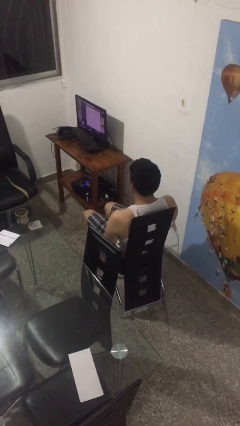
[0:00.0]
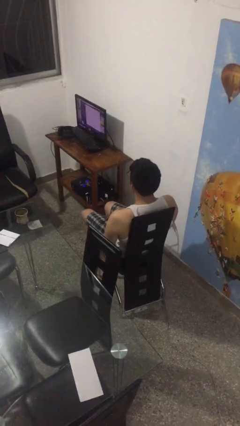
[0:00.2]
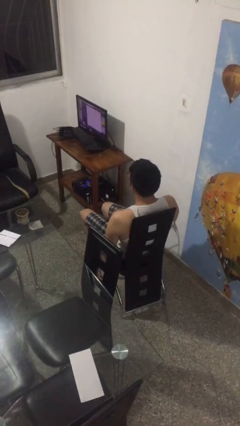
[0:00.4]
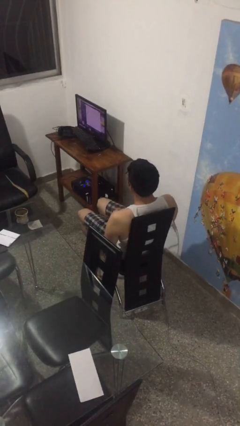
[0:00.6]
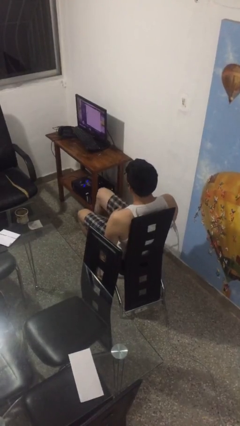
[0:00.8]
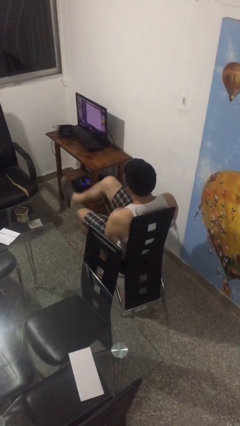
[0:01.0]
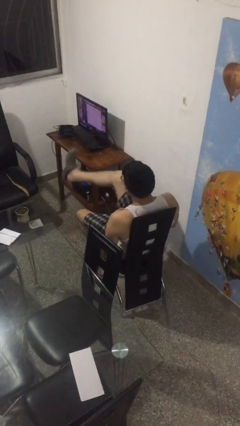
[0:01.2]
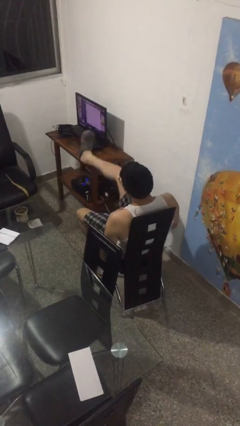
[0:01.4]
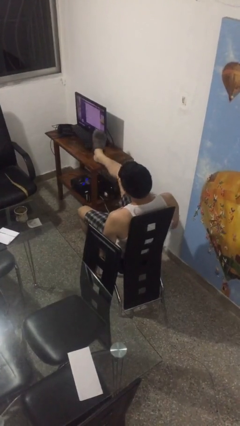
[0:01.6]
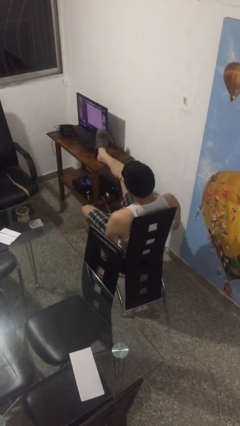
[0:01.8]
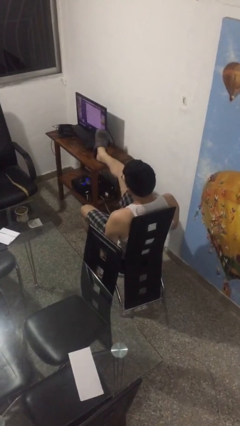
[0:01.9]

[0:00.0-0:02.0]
person puts feet up

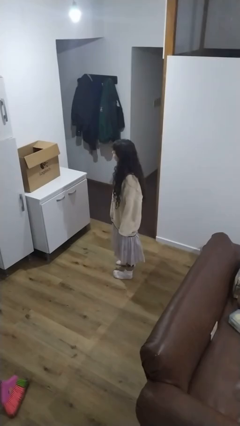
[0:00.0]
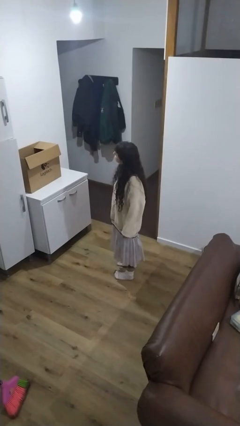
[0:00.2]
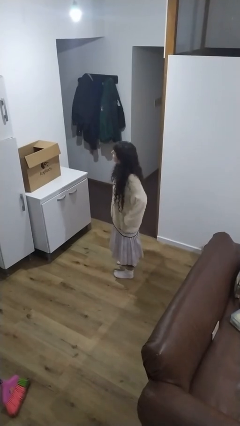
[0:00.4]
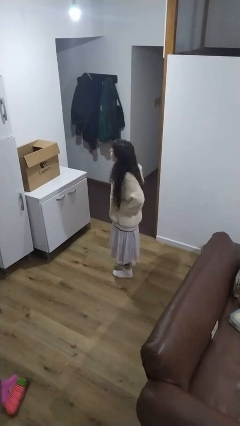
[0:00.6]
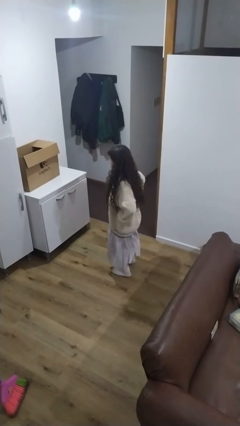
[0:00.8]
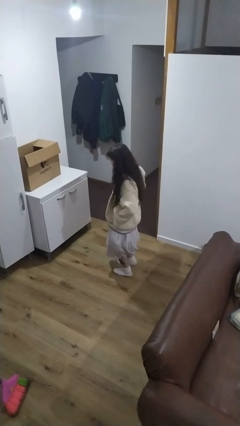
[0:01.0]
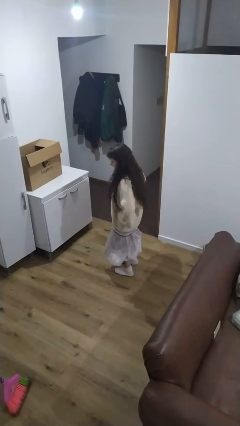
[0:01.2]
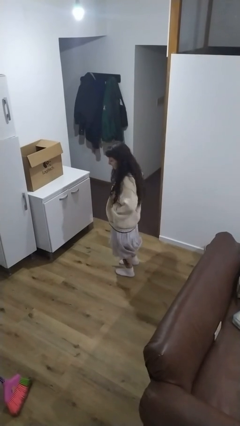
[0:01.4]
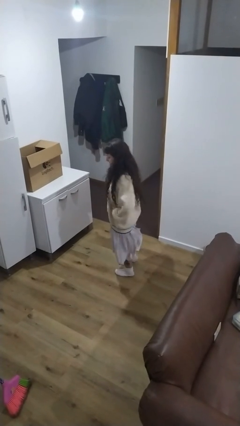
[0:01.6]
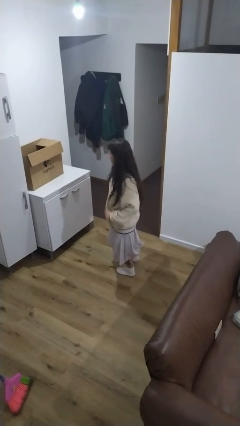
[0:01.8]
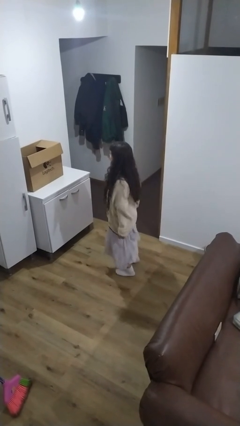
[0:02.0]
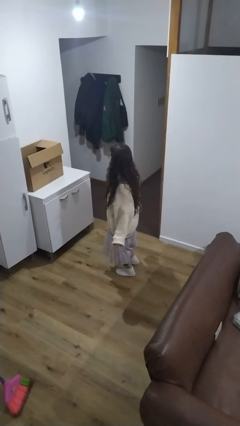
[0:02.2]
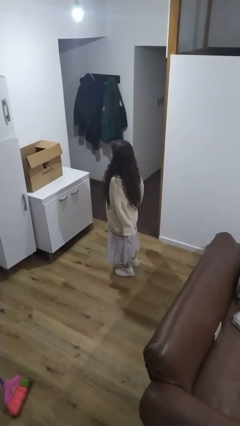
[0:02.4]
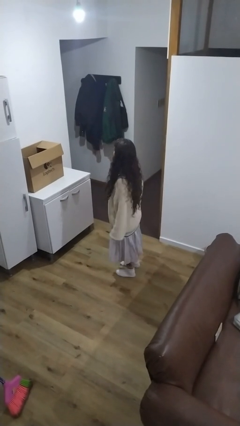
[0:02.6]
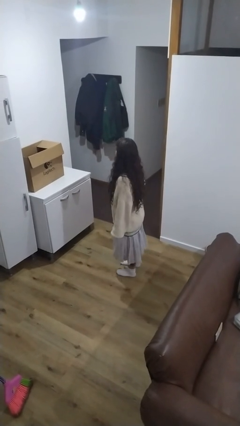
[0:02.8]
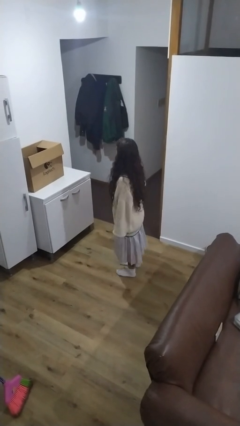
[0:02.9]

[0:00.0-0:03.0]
person wiggles hips

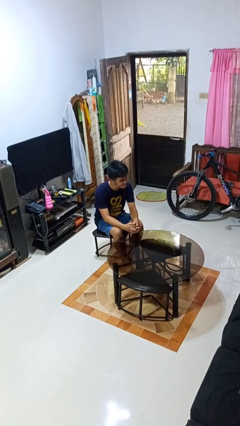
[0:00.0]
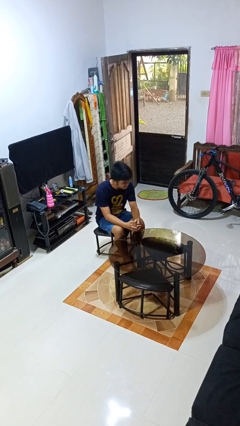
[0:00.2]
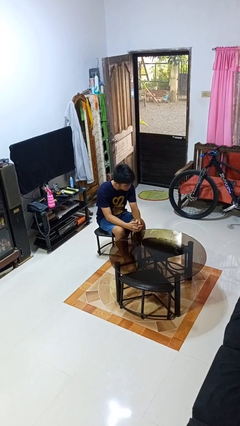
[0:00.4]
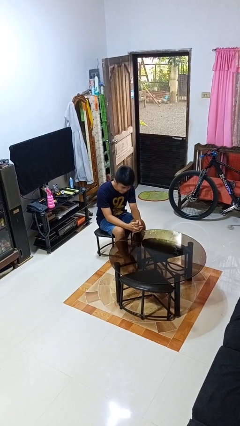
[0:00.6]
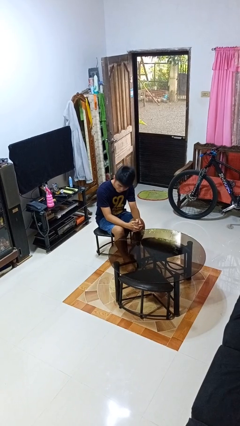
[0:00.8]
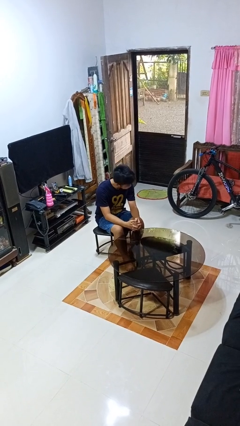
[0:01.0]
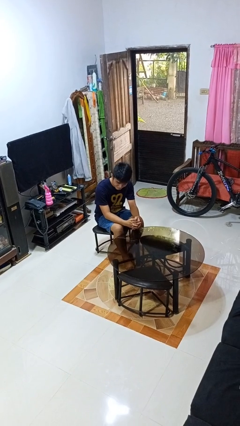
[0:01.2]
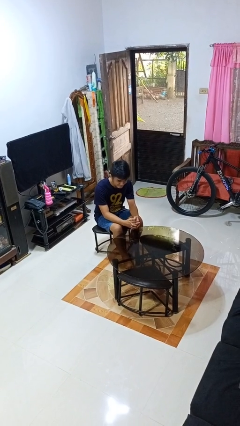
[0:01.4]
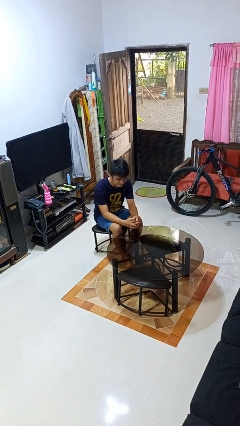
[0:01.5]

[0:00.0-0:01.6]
person shakes head

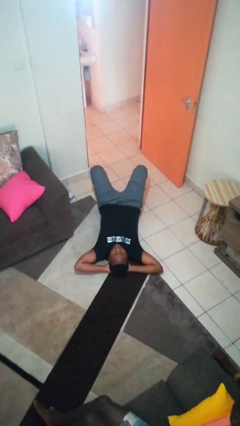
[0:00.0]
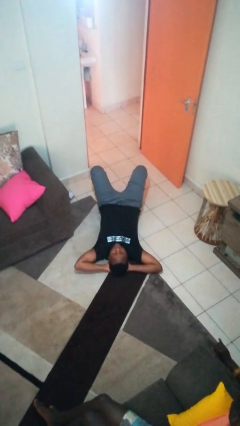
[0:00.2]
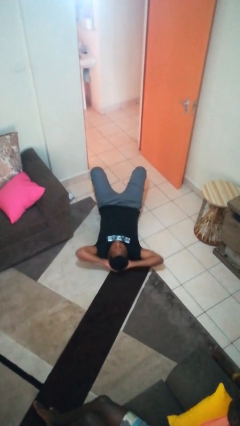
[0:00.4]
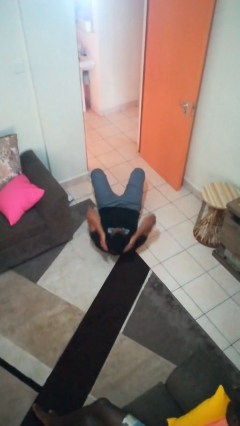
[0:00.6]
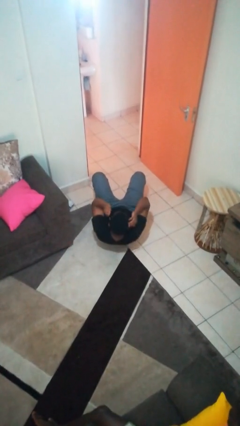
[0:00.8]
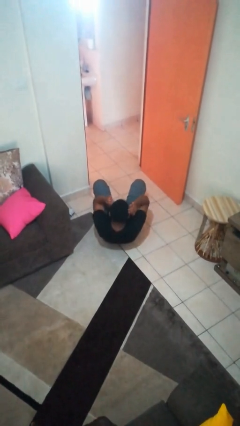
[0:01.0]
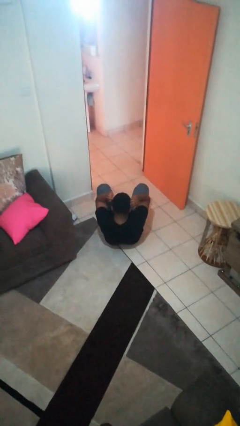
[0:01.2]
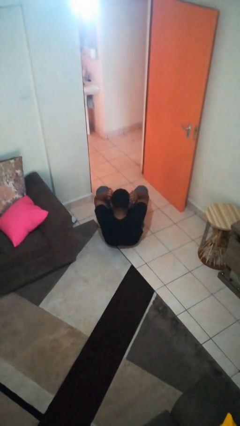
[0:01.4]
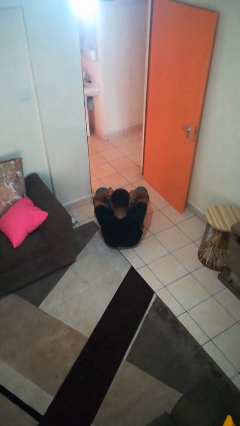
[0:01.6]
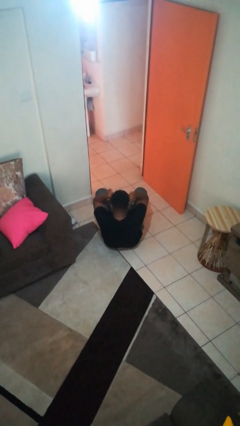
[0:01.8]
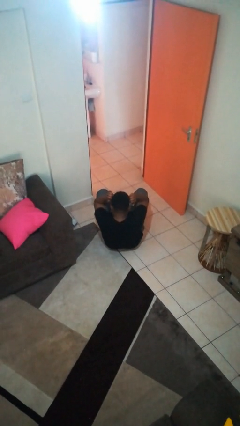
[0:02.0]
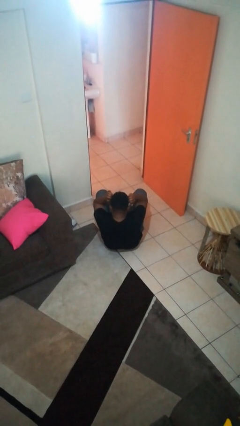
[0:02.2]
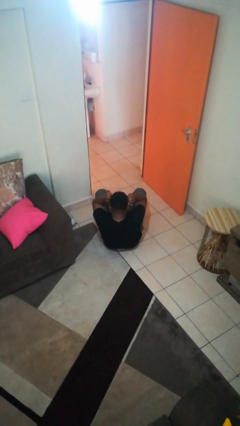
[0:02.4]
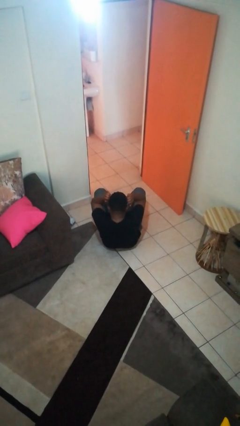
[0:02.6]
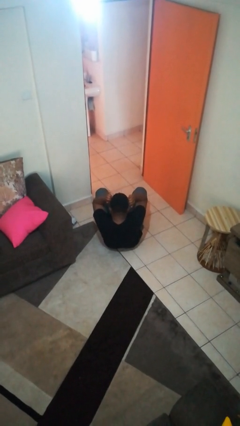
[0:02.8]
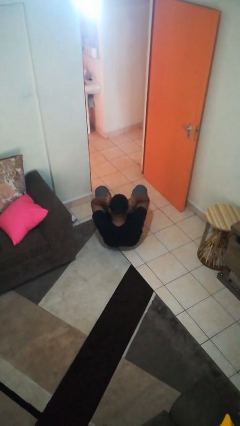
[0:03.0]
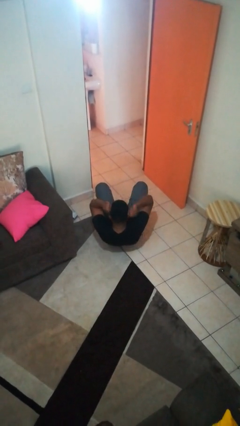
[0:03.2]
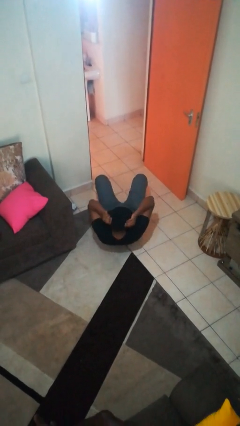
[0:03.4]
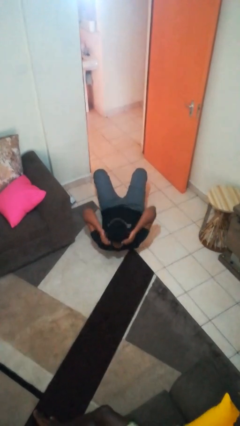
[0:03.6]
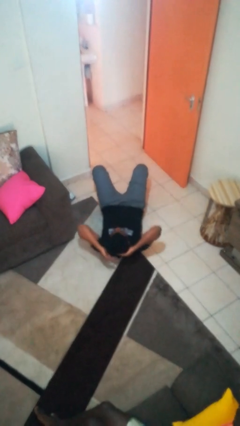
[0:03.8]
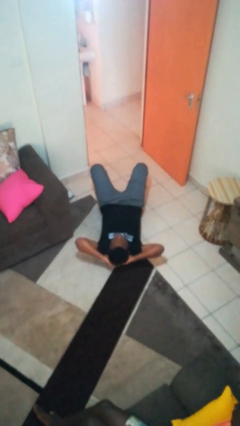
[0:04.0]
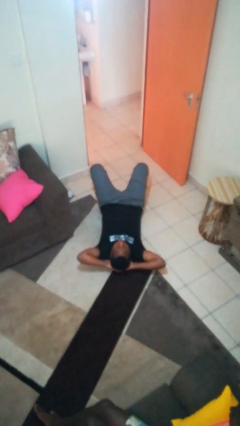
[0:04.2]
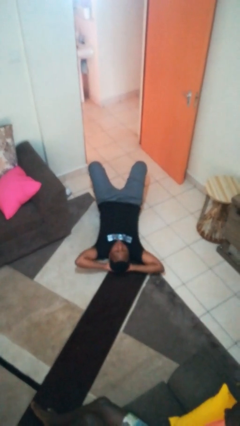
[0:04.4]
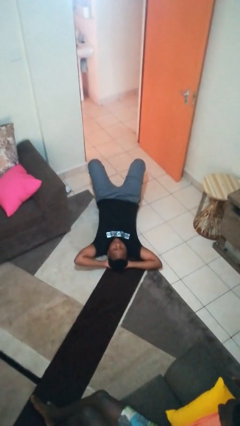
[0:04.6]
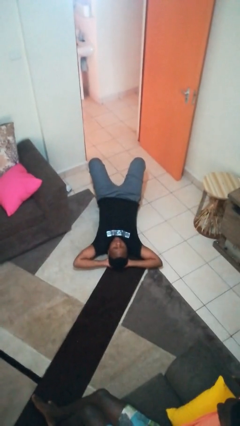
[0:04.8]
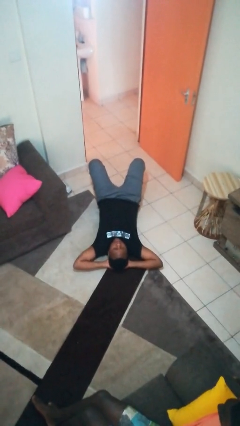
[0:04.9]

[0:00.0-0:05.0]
person exercises with situp

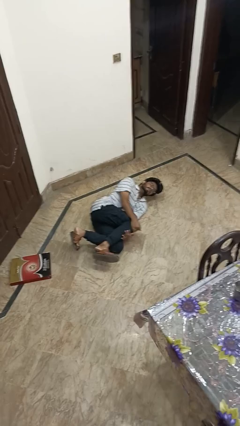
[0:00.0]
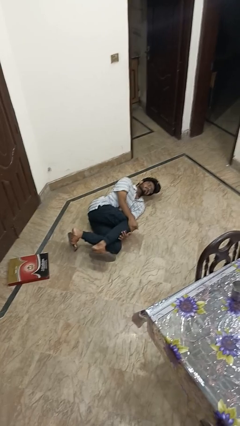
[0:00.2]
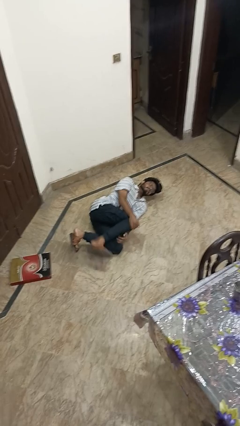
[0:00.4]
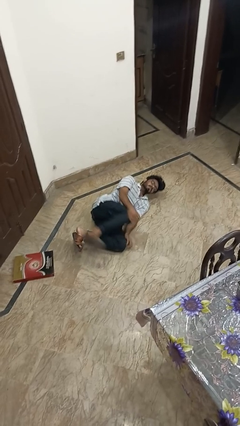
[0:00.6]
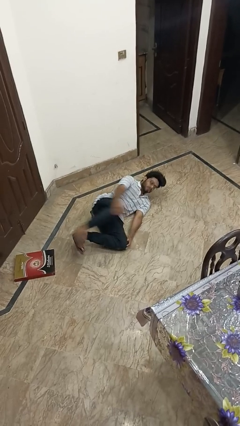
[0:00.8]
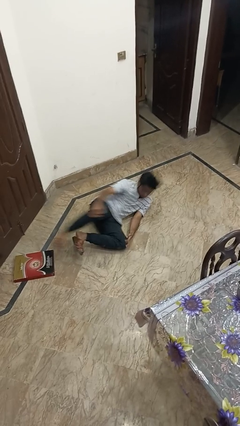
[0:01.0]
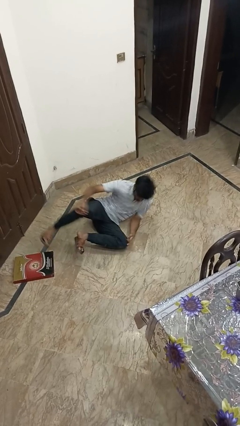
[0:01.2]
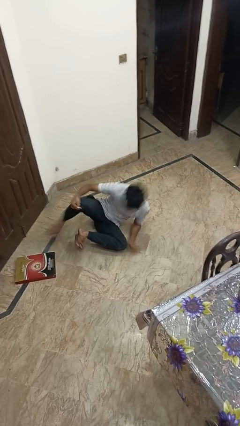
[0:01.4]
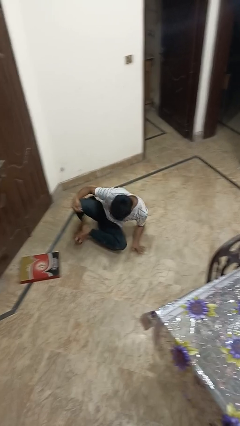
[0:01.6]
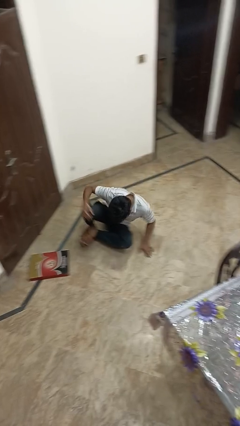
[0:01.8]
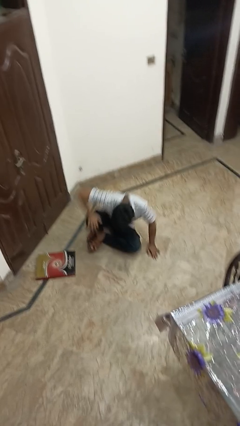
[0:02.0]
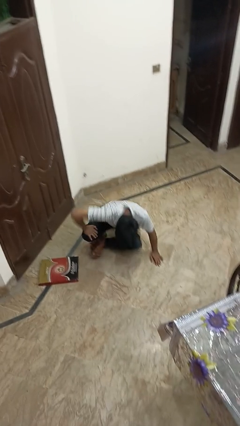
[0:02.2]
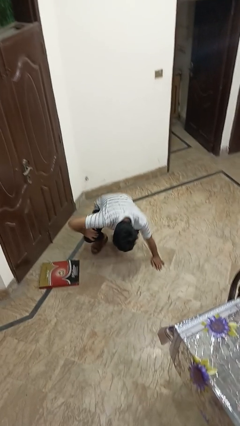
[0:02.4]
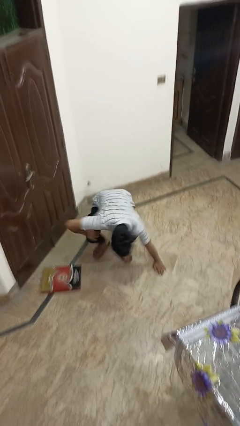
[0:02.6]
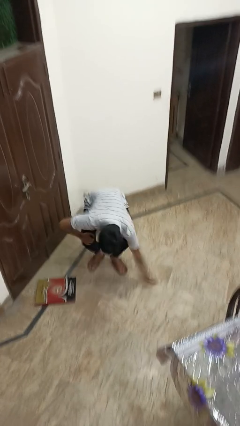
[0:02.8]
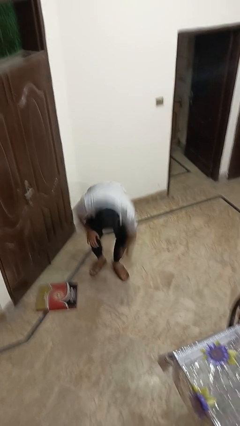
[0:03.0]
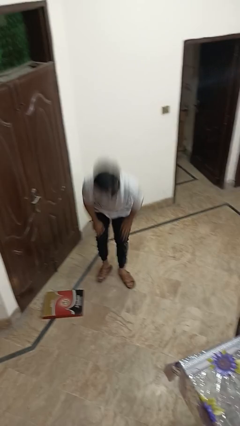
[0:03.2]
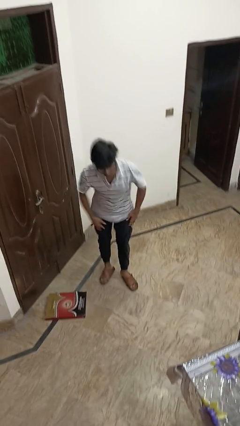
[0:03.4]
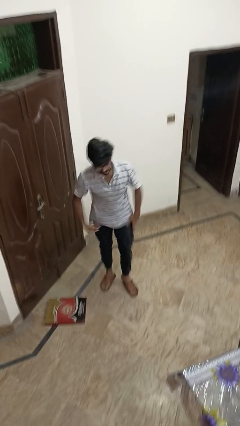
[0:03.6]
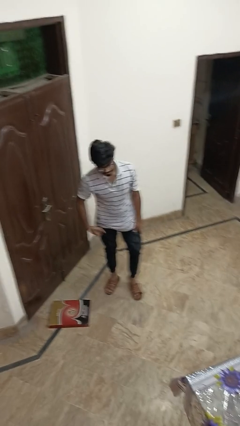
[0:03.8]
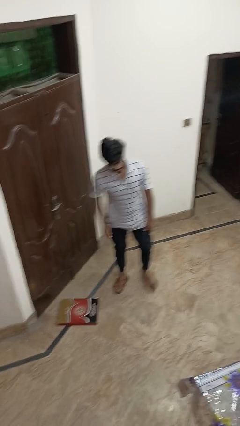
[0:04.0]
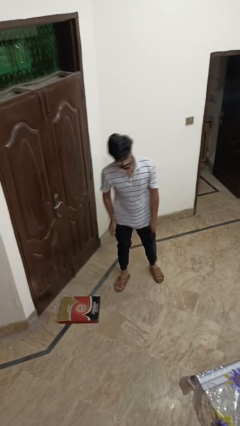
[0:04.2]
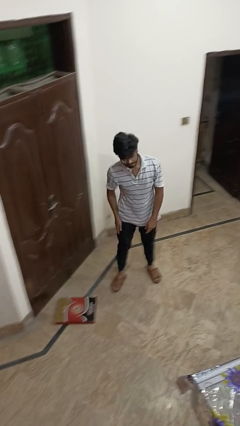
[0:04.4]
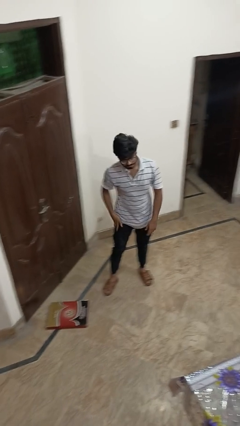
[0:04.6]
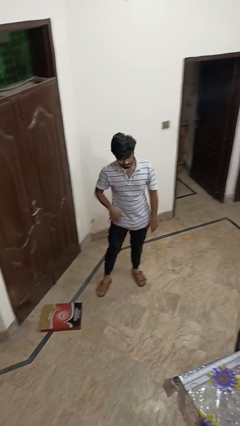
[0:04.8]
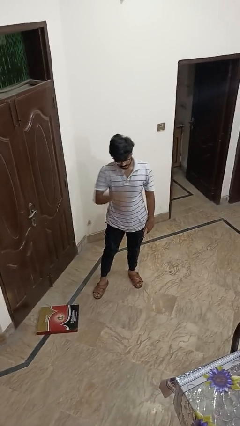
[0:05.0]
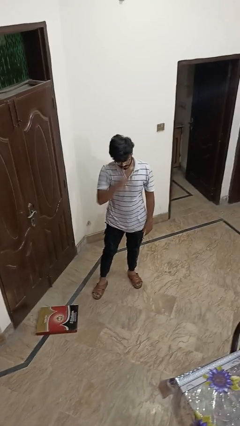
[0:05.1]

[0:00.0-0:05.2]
person stands up from floor

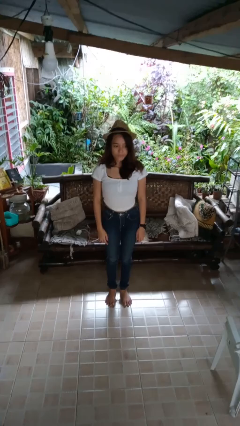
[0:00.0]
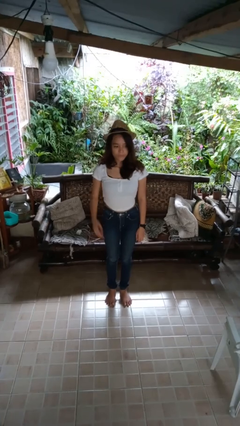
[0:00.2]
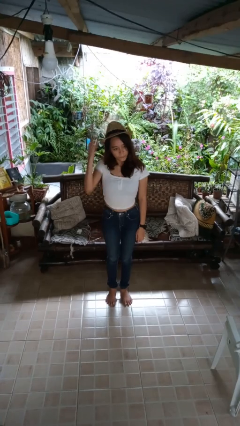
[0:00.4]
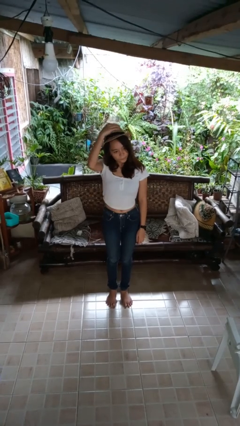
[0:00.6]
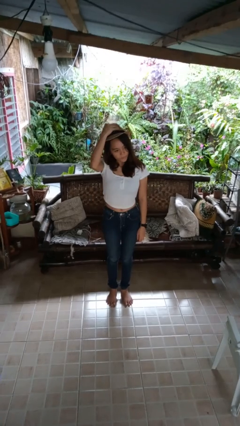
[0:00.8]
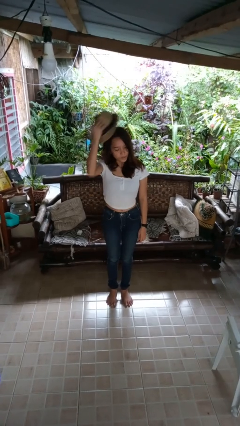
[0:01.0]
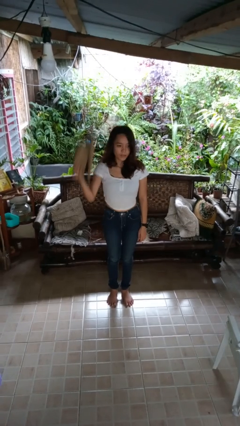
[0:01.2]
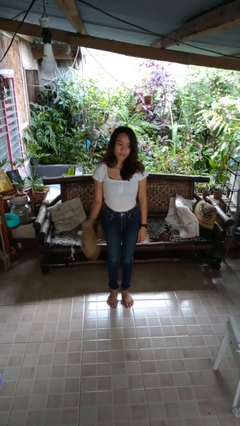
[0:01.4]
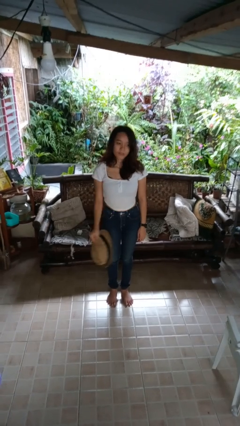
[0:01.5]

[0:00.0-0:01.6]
person takes off hat
